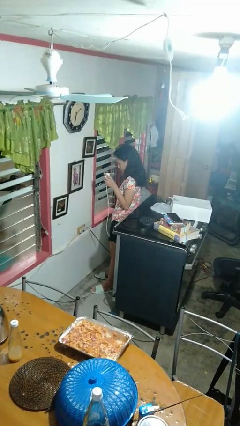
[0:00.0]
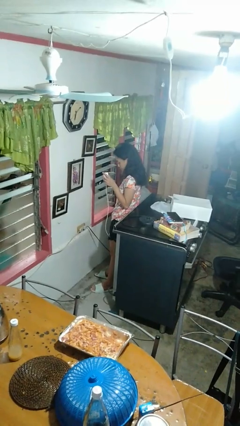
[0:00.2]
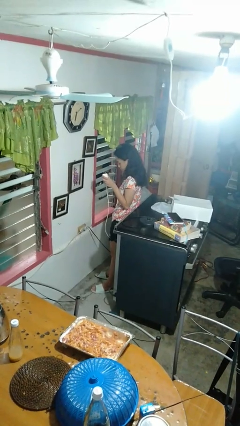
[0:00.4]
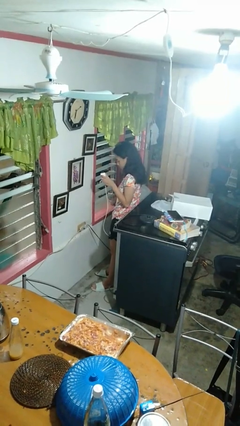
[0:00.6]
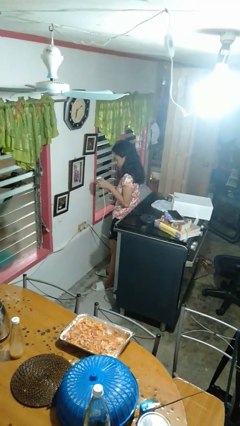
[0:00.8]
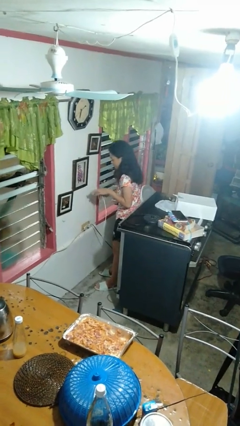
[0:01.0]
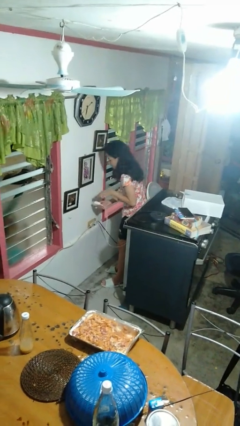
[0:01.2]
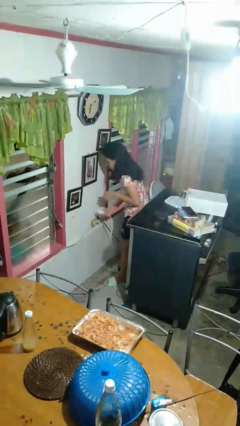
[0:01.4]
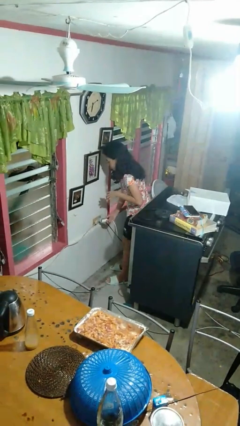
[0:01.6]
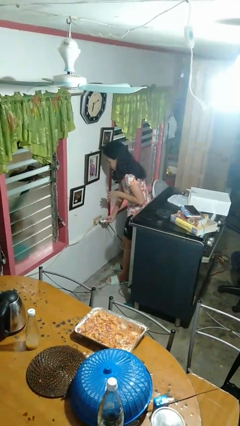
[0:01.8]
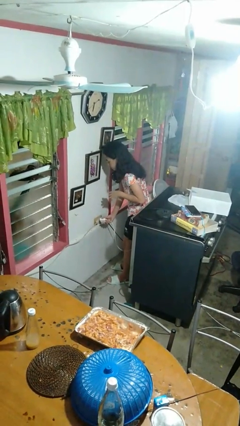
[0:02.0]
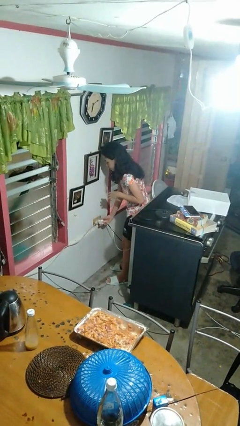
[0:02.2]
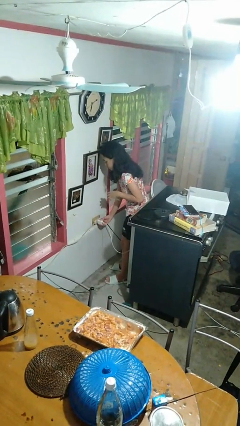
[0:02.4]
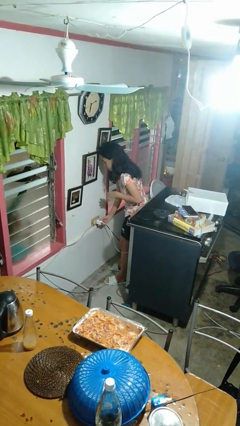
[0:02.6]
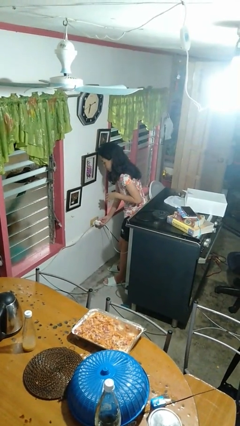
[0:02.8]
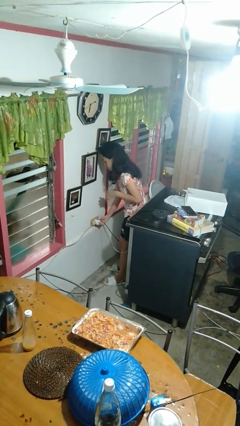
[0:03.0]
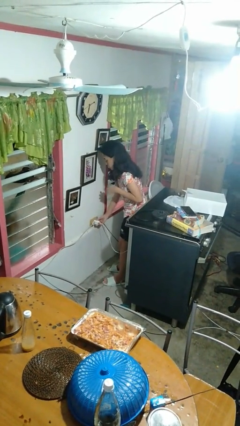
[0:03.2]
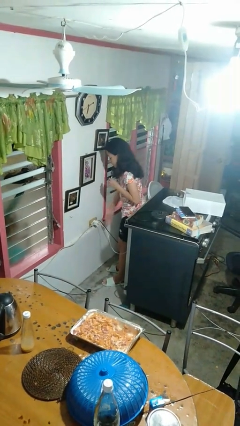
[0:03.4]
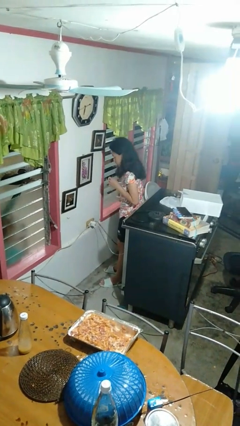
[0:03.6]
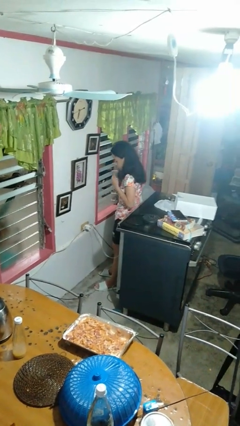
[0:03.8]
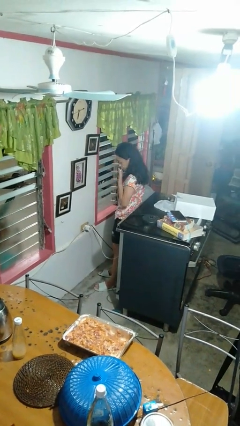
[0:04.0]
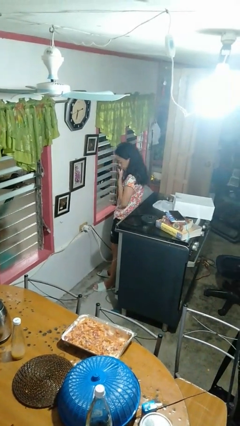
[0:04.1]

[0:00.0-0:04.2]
person plugs into electrical socket

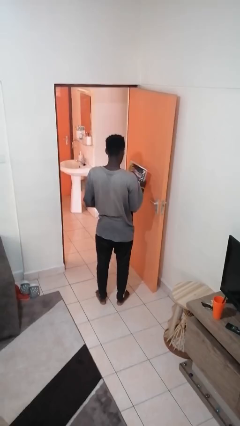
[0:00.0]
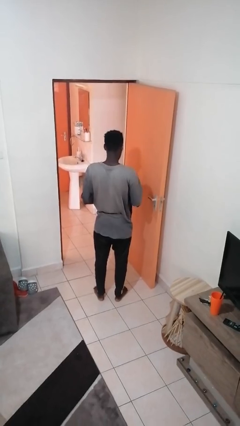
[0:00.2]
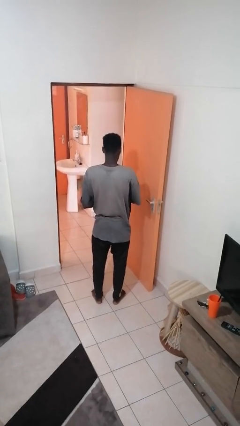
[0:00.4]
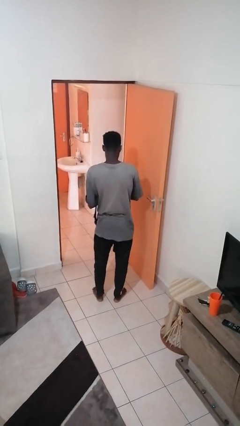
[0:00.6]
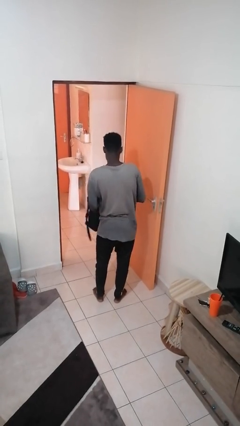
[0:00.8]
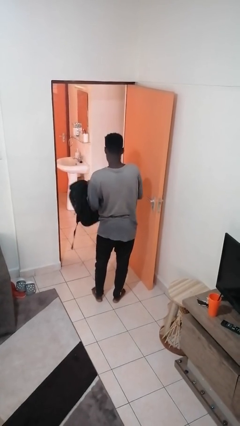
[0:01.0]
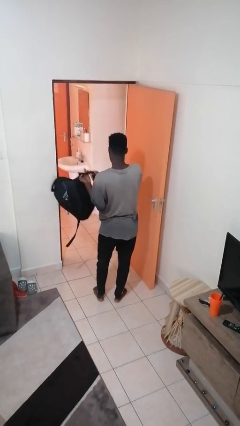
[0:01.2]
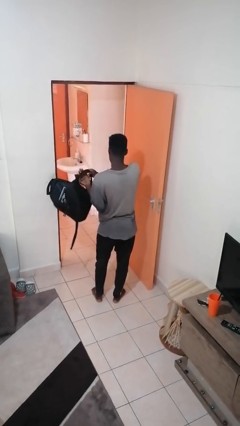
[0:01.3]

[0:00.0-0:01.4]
person puts object into backpack

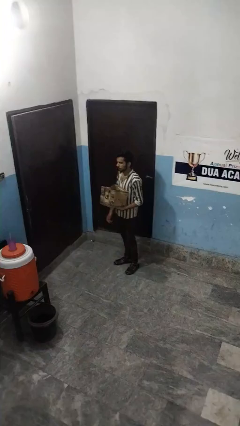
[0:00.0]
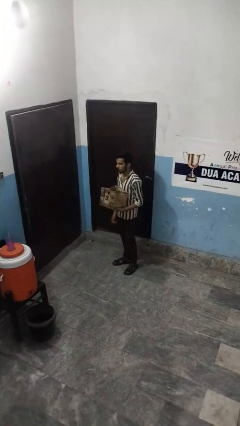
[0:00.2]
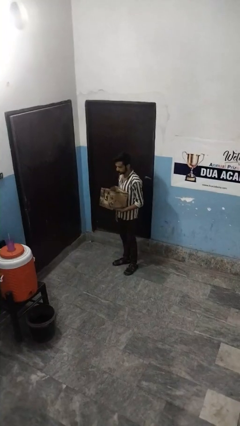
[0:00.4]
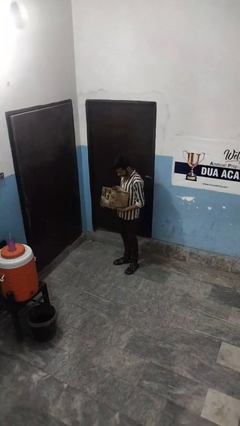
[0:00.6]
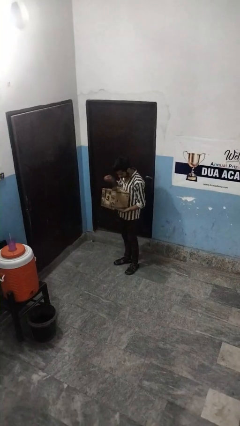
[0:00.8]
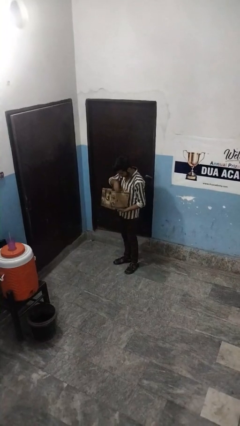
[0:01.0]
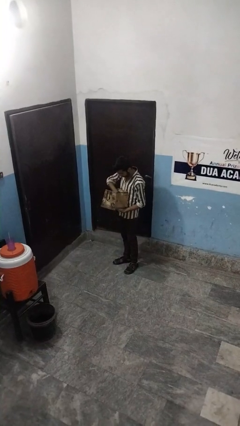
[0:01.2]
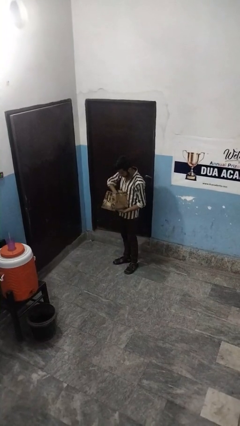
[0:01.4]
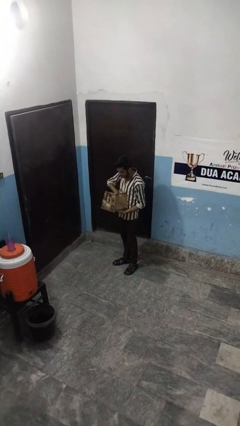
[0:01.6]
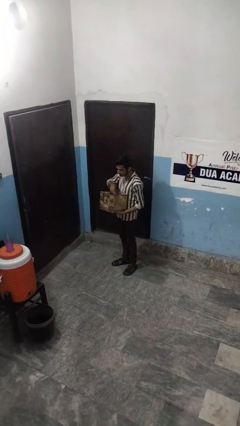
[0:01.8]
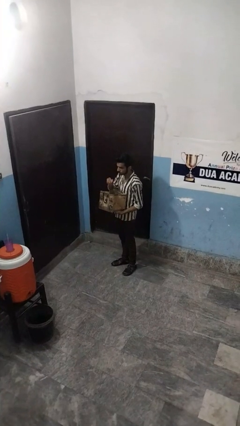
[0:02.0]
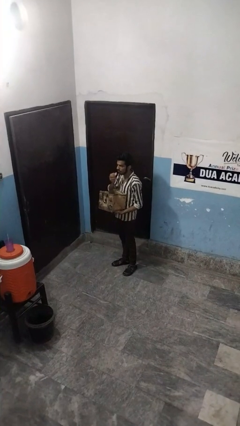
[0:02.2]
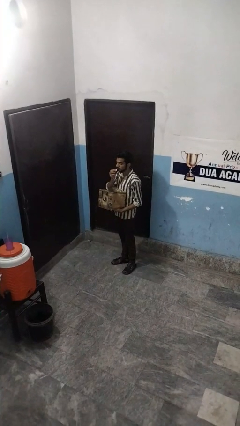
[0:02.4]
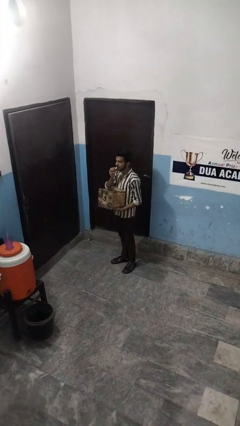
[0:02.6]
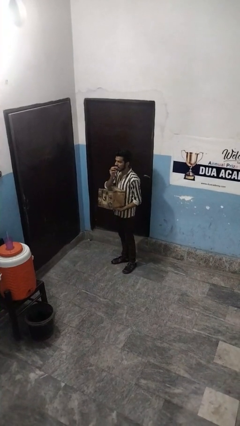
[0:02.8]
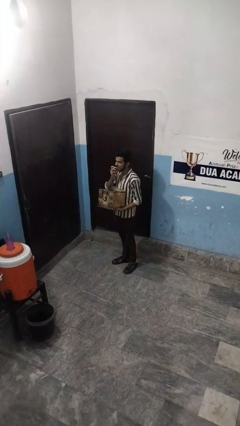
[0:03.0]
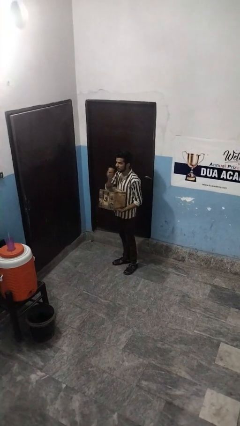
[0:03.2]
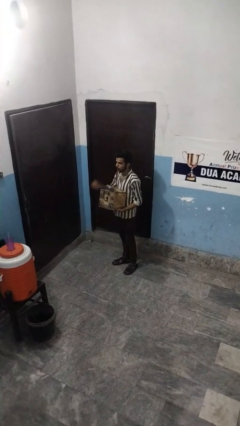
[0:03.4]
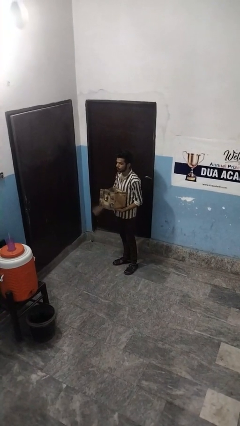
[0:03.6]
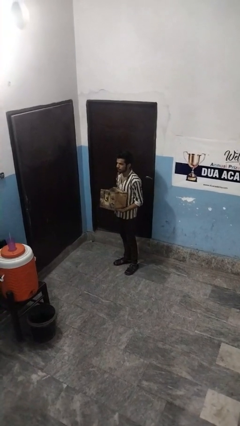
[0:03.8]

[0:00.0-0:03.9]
person eats snack from bag

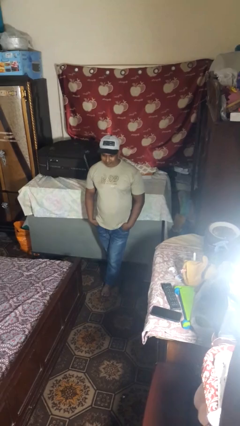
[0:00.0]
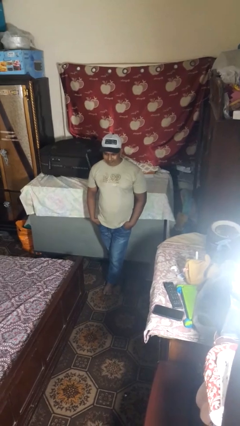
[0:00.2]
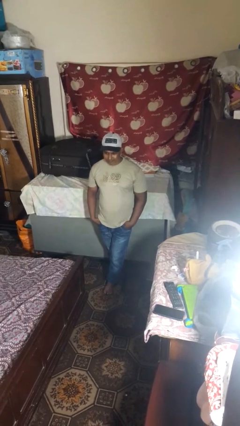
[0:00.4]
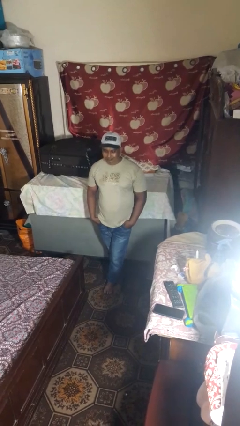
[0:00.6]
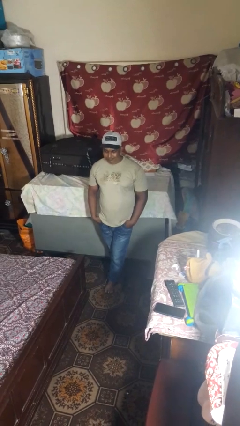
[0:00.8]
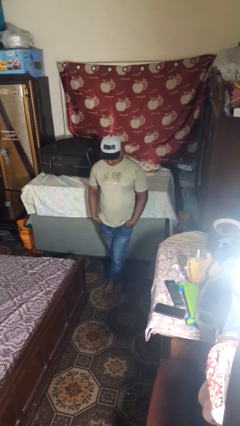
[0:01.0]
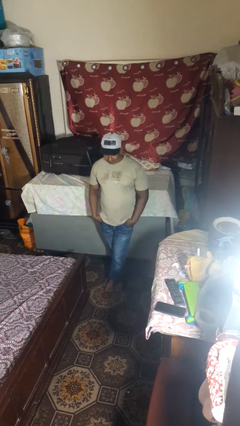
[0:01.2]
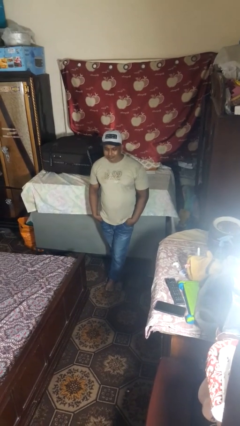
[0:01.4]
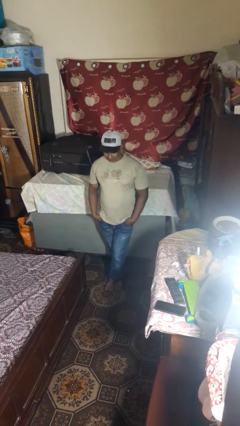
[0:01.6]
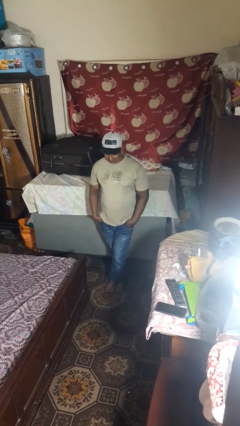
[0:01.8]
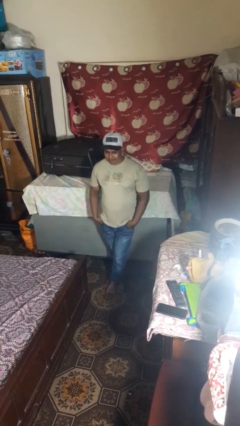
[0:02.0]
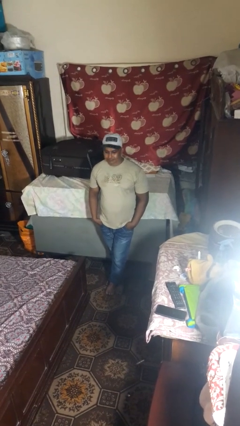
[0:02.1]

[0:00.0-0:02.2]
person nods head

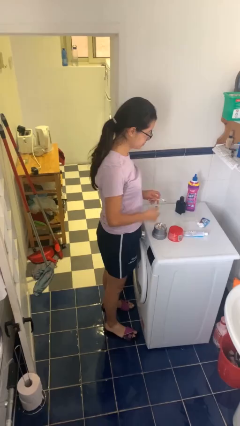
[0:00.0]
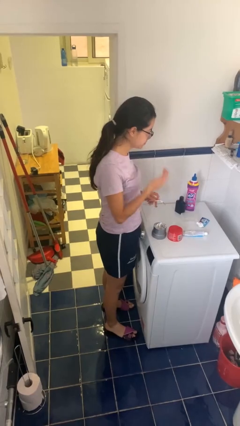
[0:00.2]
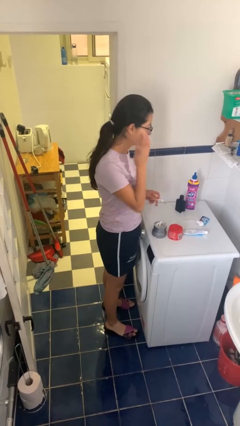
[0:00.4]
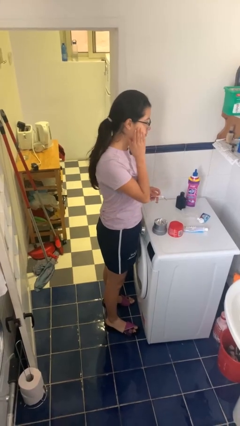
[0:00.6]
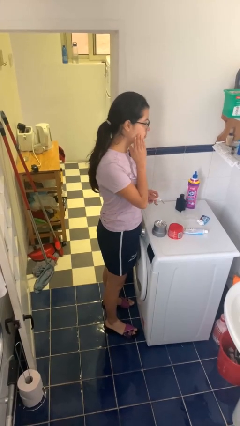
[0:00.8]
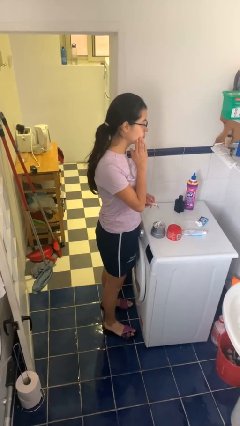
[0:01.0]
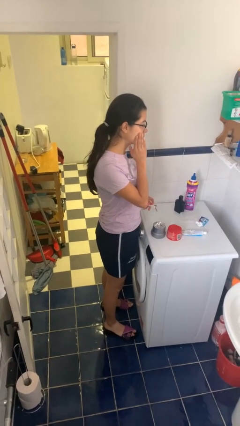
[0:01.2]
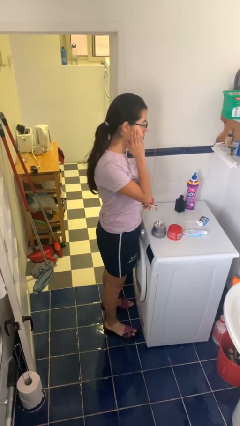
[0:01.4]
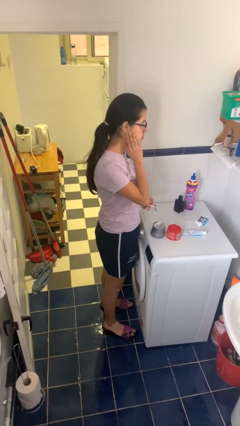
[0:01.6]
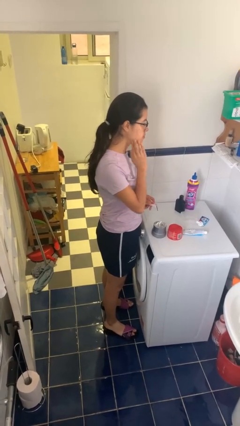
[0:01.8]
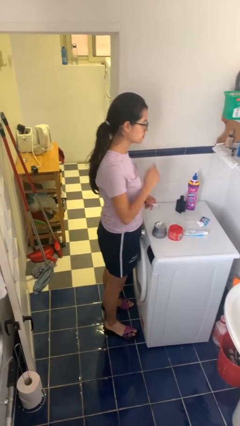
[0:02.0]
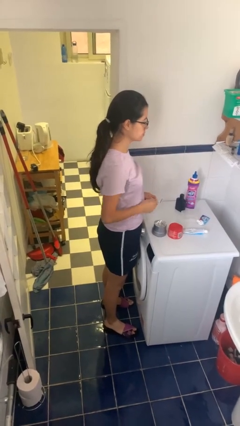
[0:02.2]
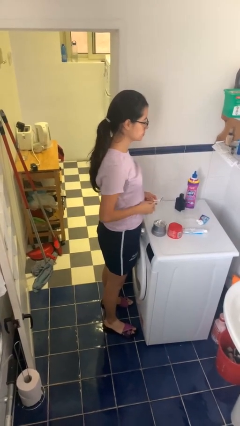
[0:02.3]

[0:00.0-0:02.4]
person applies shaving cream

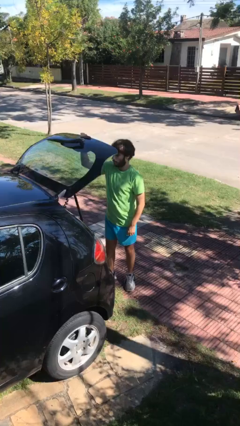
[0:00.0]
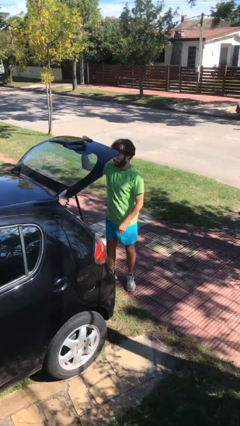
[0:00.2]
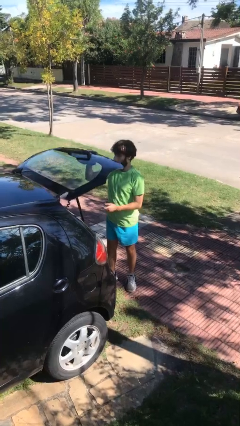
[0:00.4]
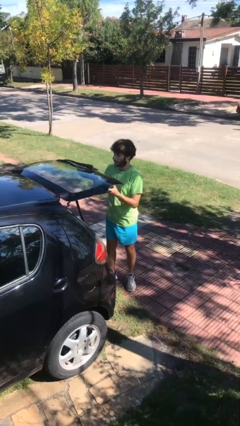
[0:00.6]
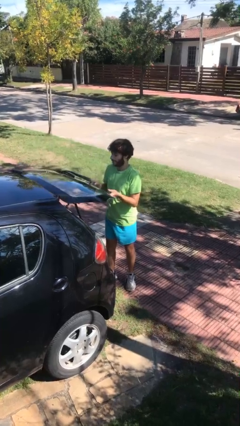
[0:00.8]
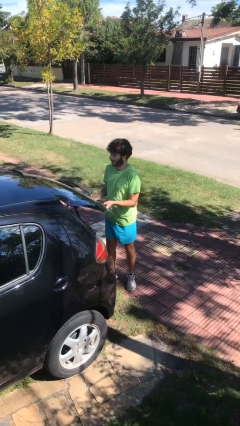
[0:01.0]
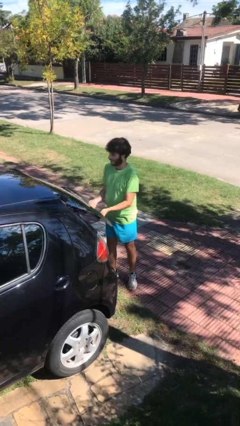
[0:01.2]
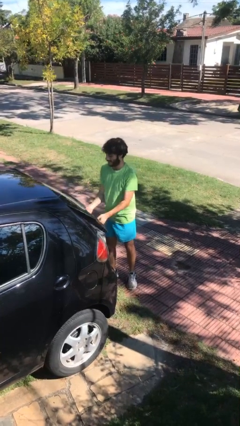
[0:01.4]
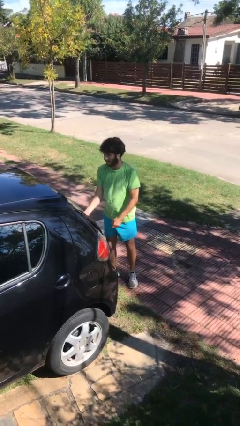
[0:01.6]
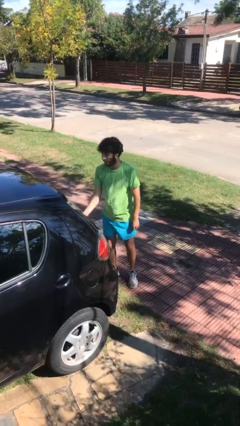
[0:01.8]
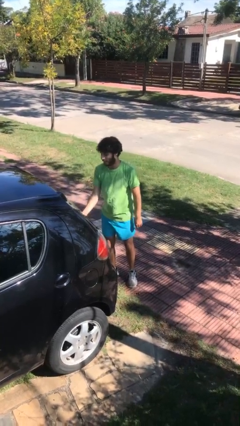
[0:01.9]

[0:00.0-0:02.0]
person closes car trunk

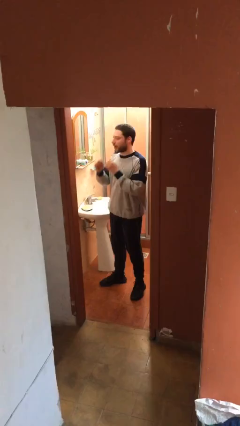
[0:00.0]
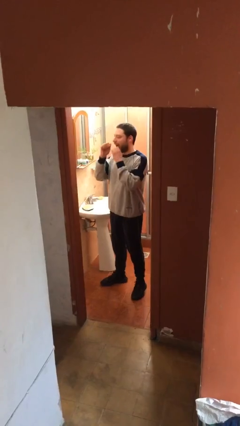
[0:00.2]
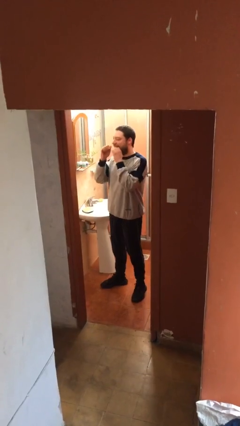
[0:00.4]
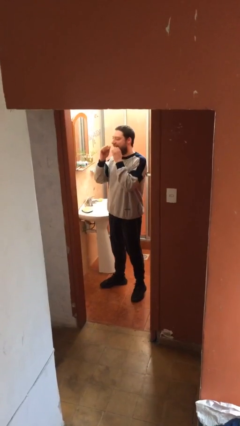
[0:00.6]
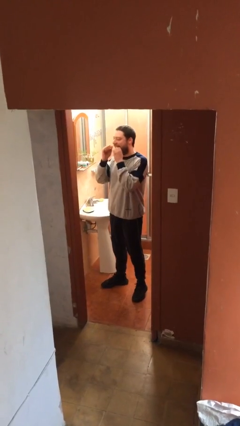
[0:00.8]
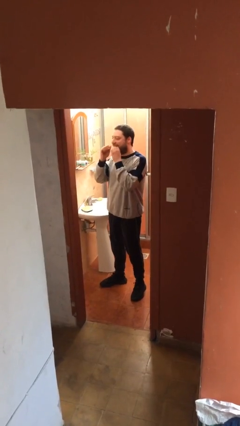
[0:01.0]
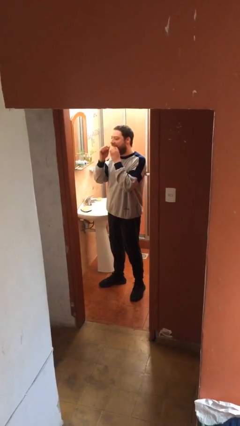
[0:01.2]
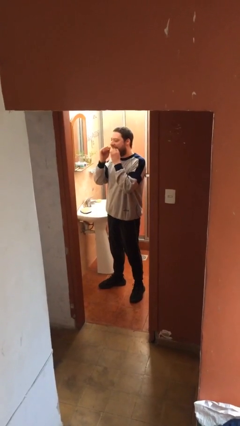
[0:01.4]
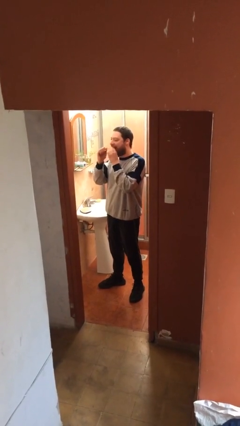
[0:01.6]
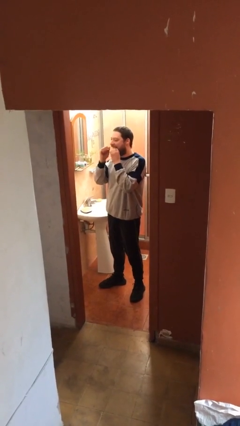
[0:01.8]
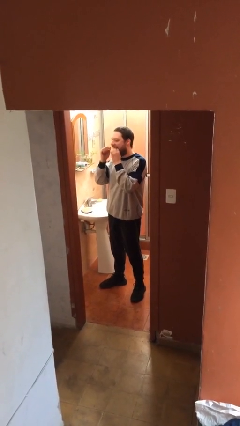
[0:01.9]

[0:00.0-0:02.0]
person flosses
